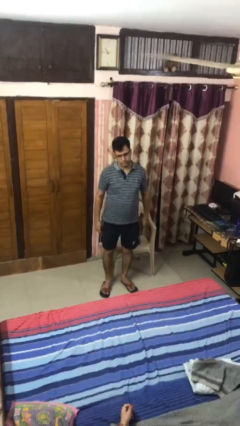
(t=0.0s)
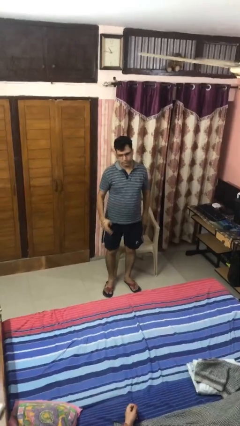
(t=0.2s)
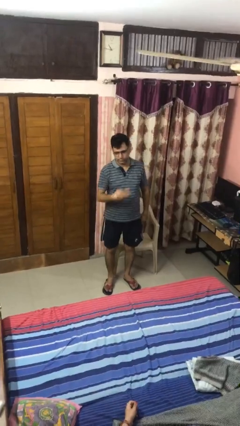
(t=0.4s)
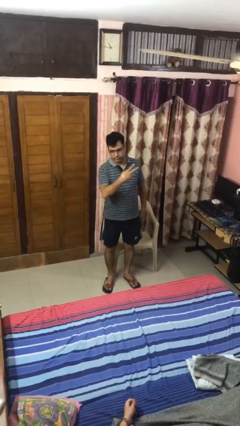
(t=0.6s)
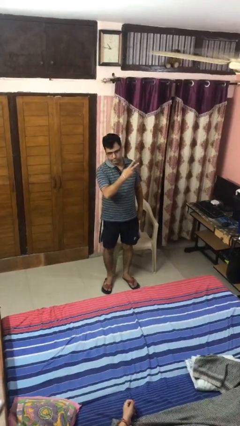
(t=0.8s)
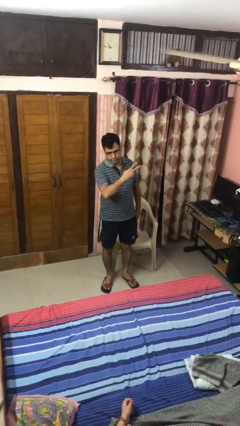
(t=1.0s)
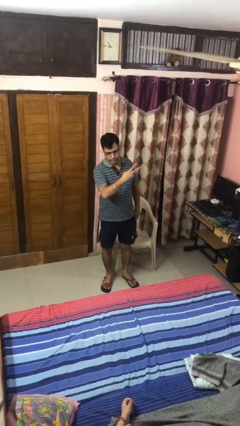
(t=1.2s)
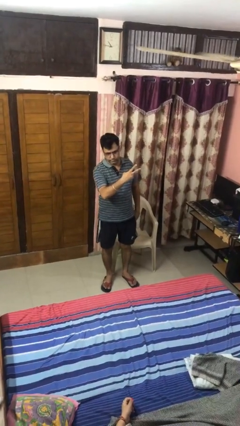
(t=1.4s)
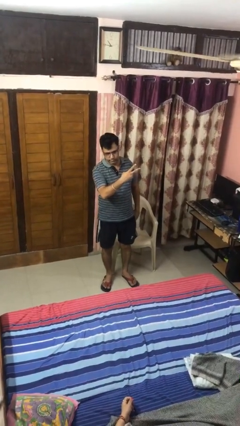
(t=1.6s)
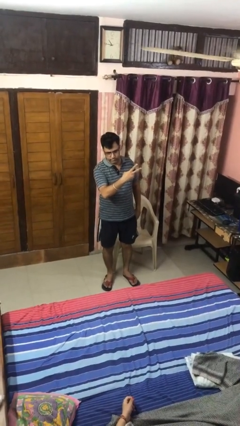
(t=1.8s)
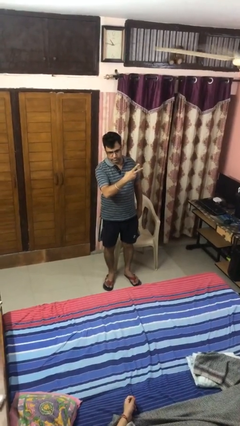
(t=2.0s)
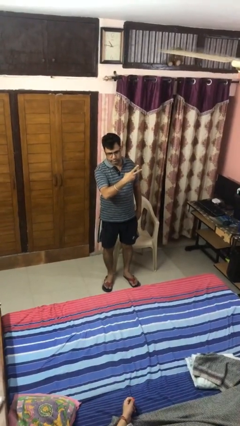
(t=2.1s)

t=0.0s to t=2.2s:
person gestures peace

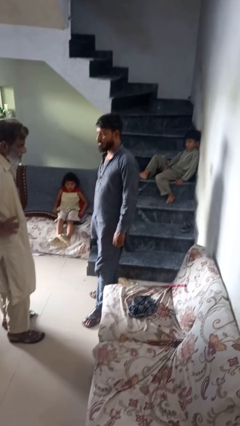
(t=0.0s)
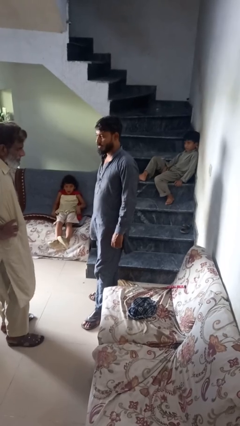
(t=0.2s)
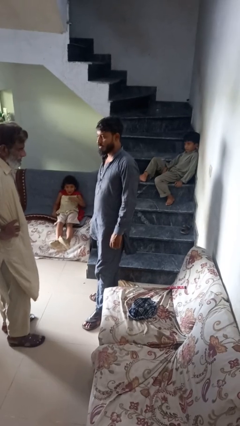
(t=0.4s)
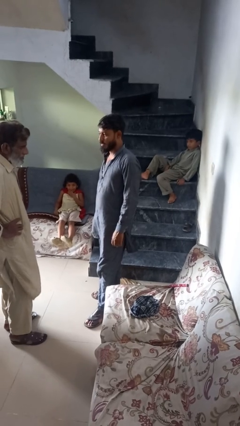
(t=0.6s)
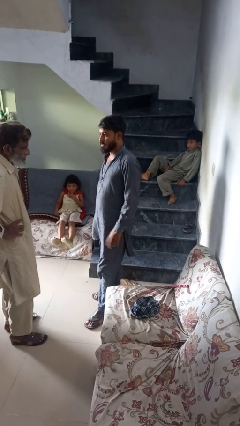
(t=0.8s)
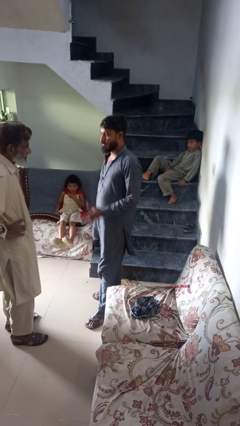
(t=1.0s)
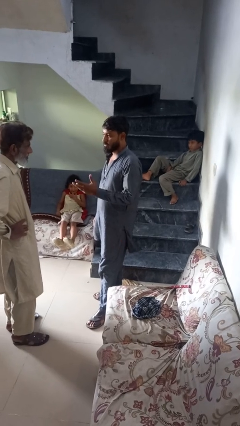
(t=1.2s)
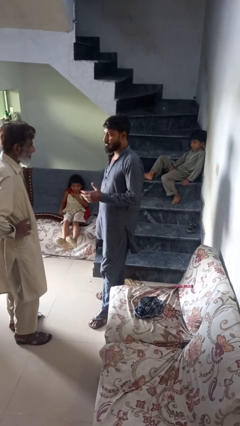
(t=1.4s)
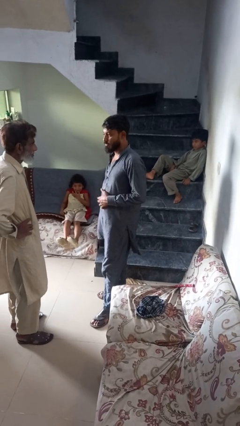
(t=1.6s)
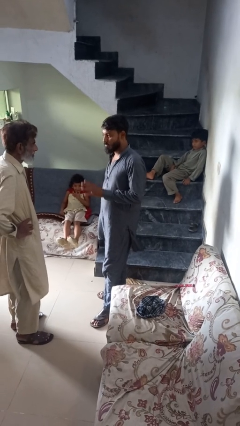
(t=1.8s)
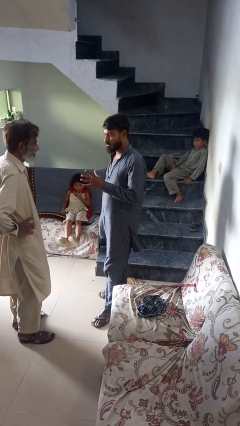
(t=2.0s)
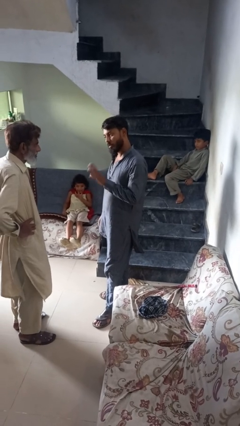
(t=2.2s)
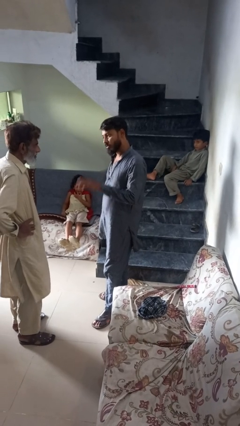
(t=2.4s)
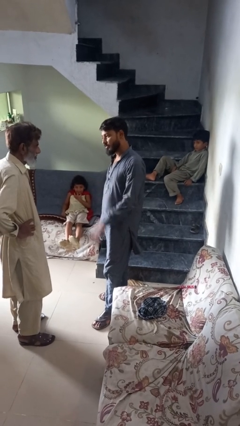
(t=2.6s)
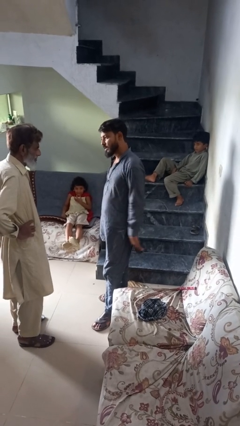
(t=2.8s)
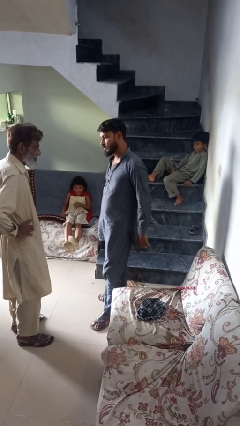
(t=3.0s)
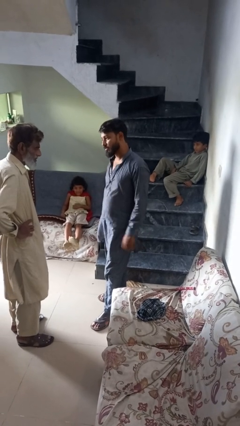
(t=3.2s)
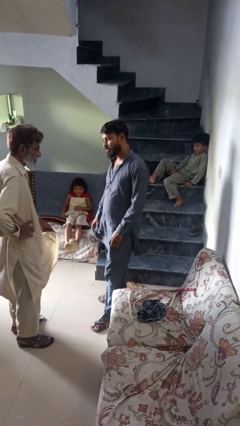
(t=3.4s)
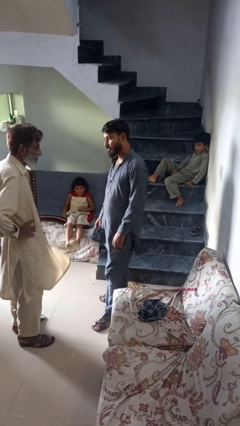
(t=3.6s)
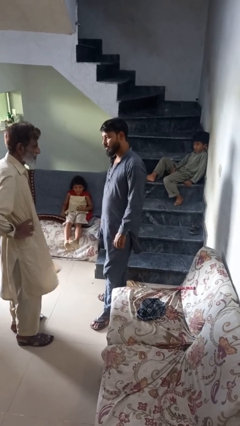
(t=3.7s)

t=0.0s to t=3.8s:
person talks to person

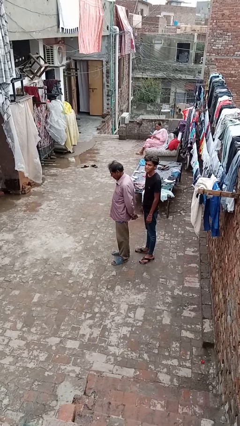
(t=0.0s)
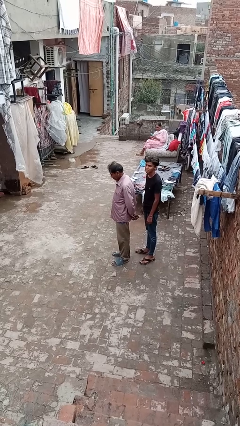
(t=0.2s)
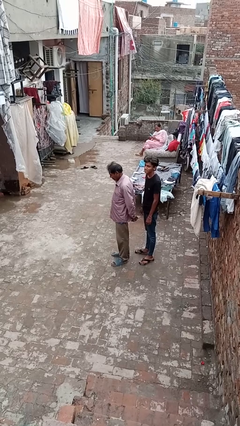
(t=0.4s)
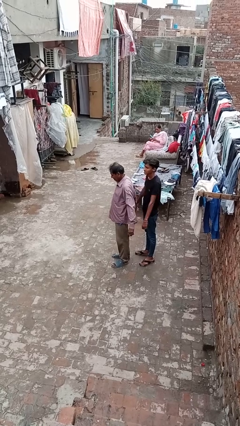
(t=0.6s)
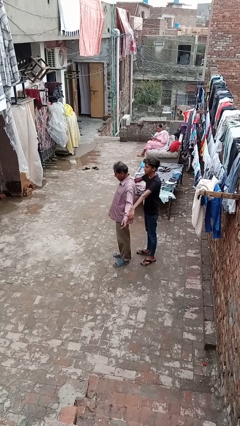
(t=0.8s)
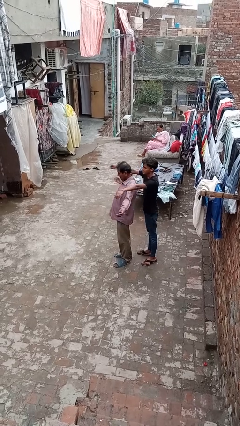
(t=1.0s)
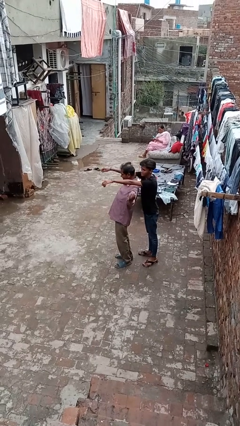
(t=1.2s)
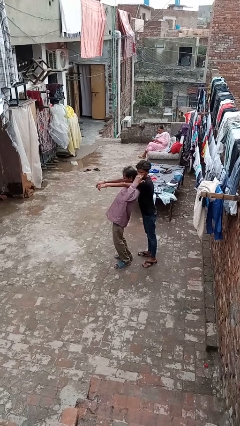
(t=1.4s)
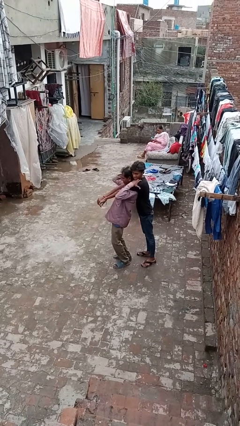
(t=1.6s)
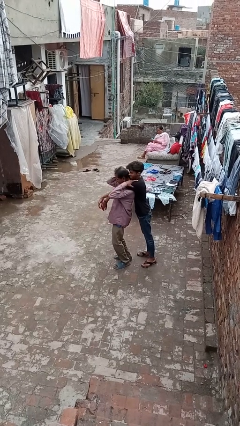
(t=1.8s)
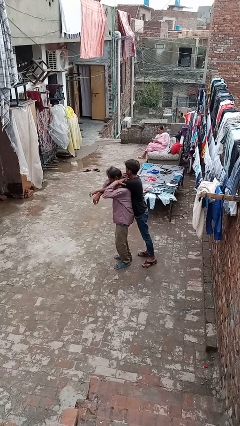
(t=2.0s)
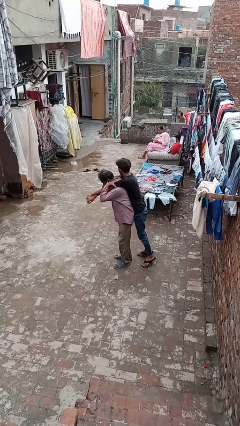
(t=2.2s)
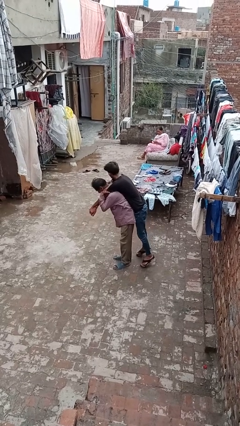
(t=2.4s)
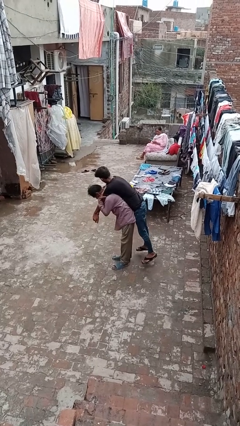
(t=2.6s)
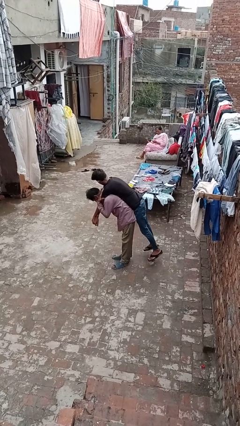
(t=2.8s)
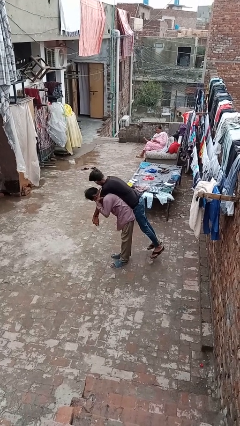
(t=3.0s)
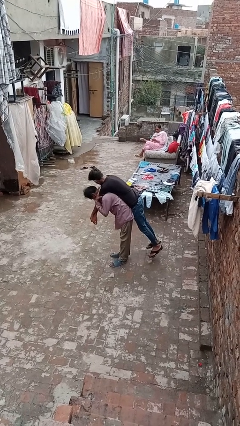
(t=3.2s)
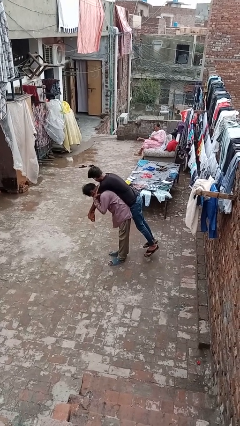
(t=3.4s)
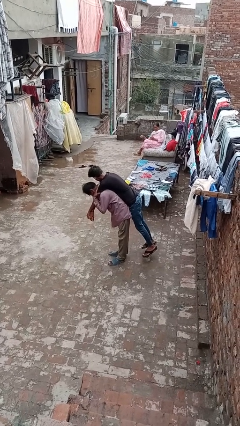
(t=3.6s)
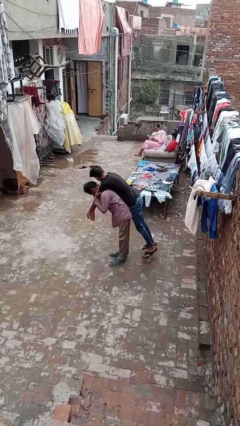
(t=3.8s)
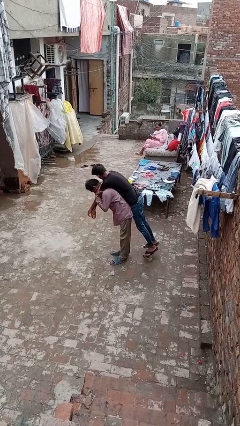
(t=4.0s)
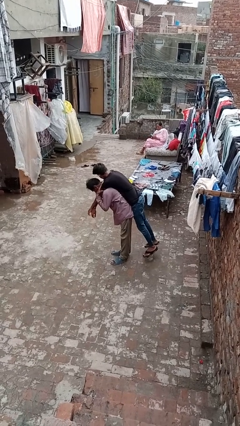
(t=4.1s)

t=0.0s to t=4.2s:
person carries person on shoulders

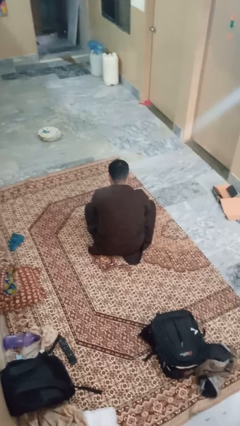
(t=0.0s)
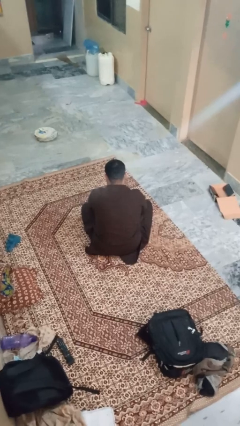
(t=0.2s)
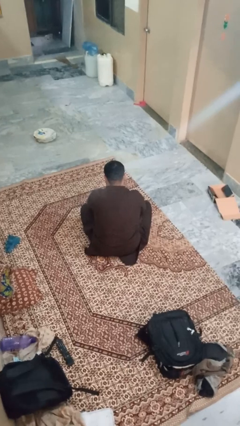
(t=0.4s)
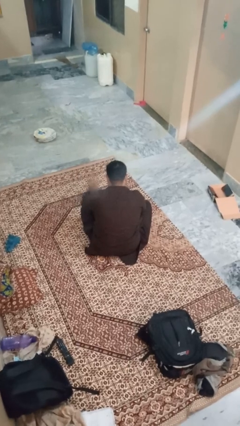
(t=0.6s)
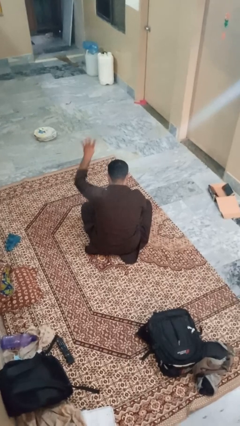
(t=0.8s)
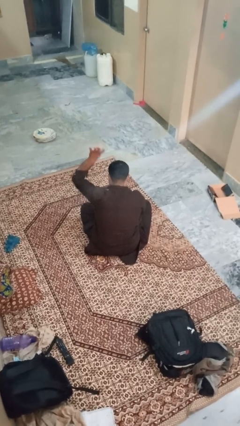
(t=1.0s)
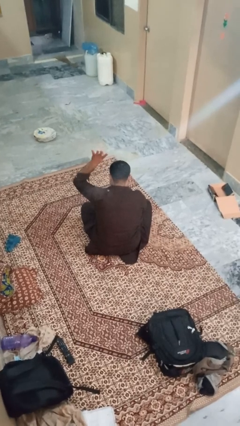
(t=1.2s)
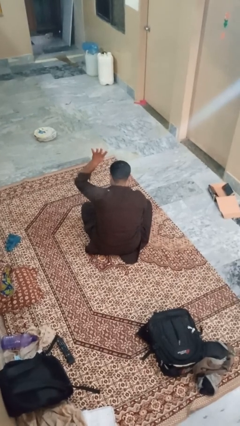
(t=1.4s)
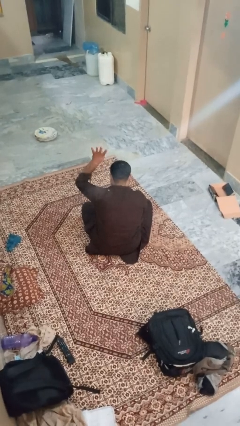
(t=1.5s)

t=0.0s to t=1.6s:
person gestures number four

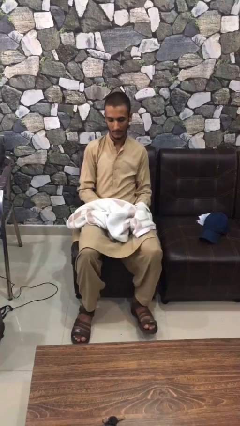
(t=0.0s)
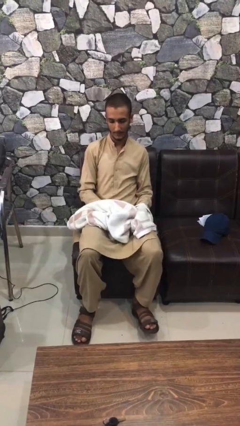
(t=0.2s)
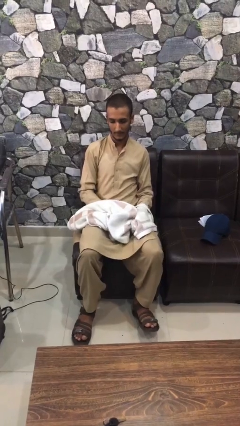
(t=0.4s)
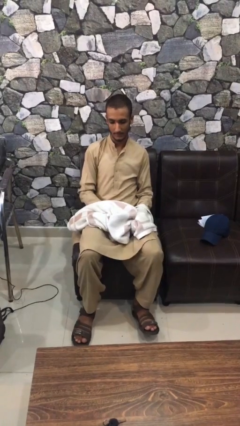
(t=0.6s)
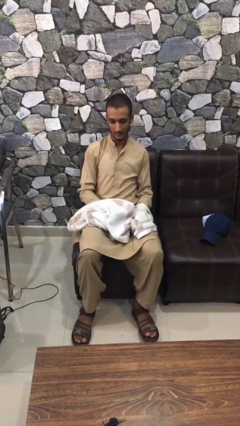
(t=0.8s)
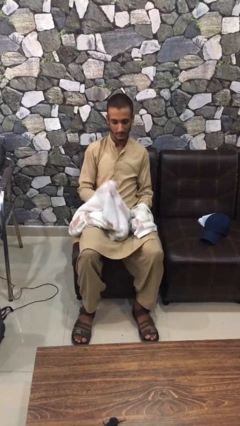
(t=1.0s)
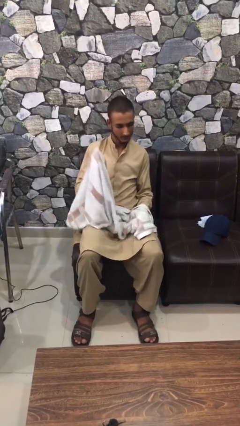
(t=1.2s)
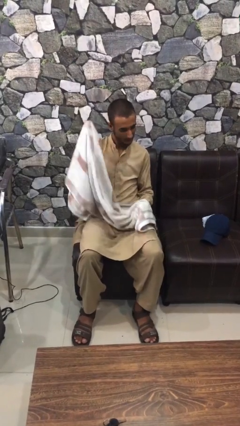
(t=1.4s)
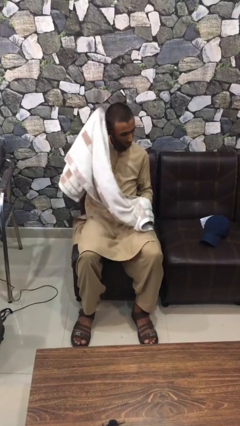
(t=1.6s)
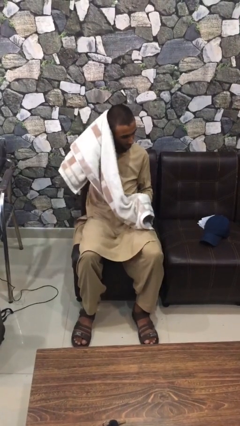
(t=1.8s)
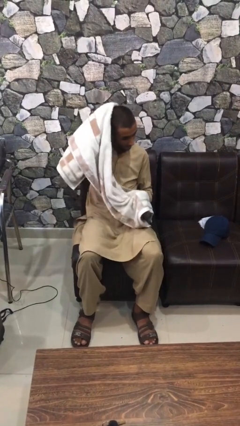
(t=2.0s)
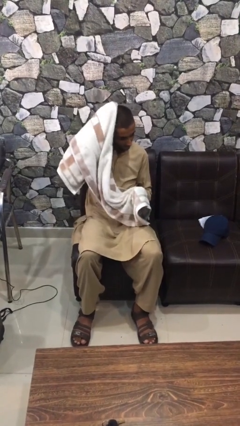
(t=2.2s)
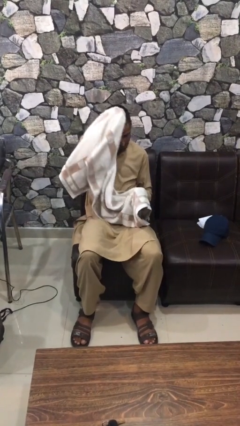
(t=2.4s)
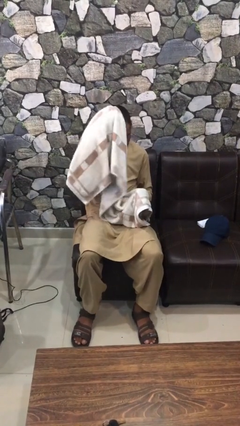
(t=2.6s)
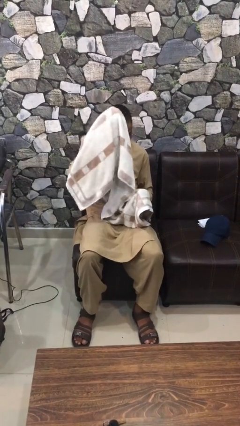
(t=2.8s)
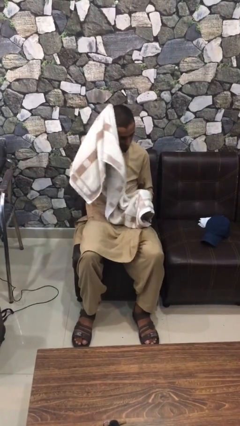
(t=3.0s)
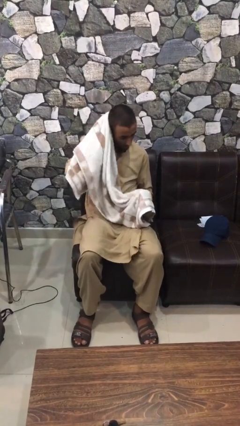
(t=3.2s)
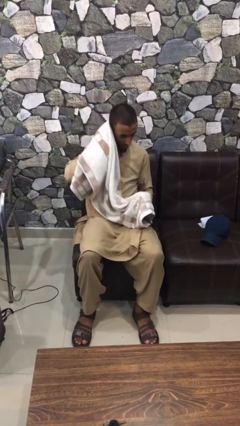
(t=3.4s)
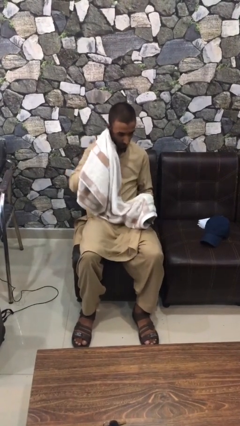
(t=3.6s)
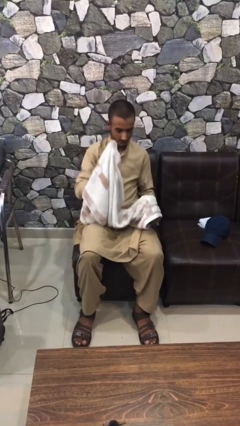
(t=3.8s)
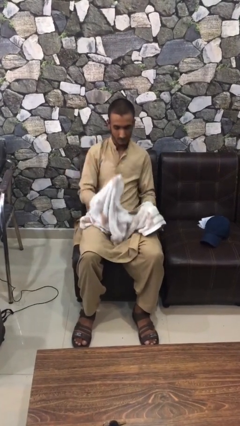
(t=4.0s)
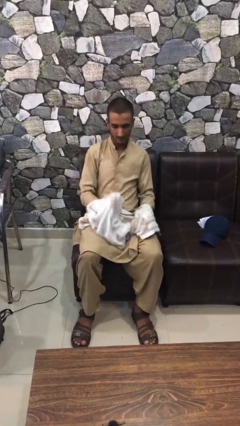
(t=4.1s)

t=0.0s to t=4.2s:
person dries hair with towel

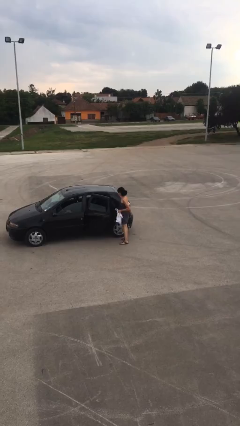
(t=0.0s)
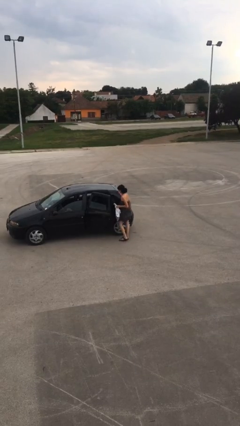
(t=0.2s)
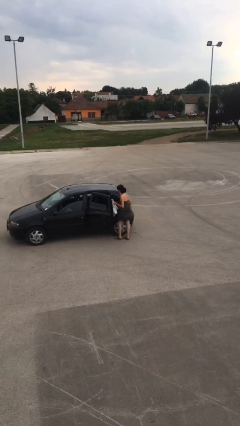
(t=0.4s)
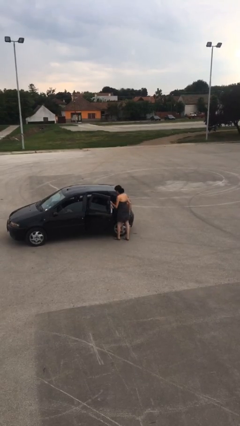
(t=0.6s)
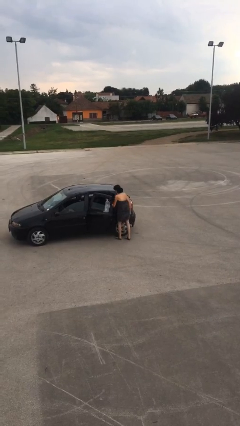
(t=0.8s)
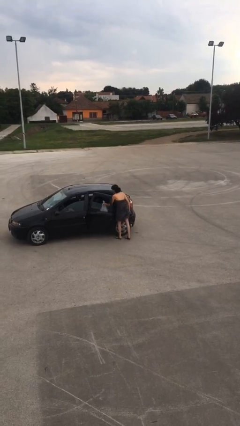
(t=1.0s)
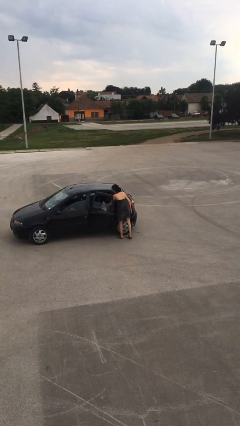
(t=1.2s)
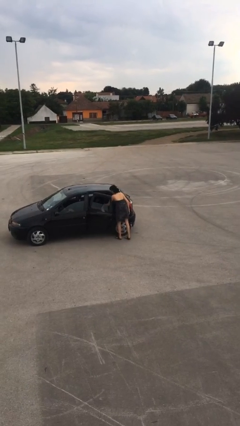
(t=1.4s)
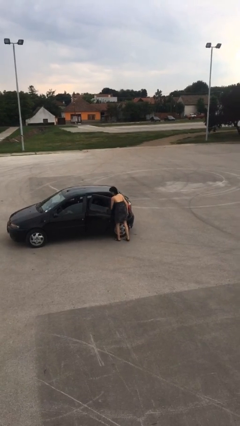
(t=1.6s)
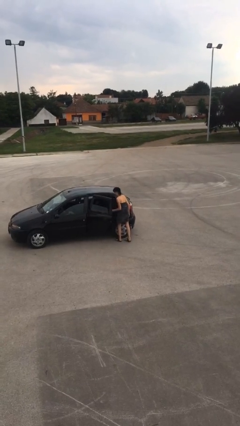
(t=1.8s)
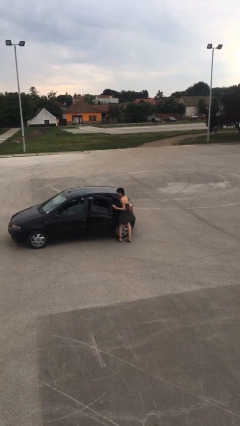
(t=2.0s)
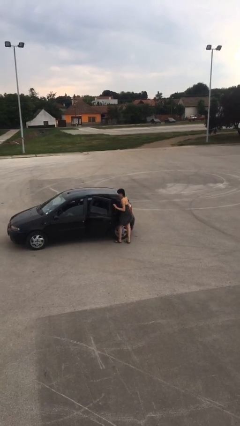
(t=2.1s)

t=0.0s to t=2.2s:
person loads car
